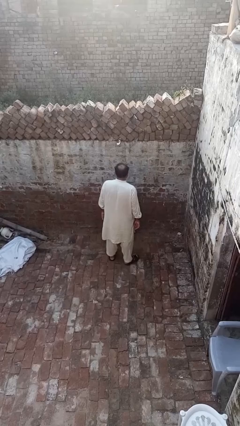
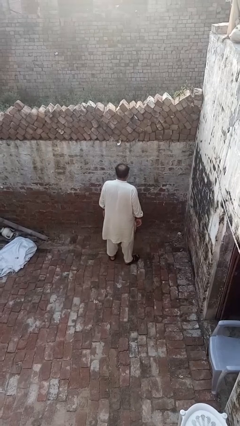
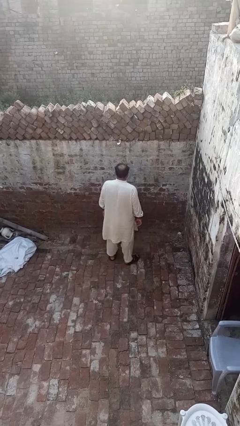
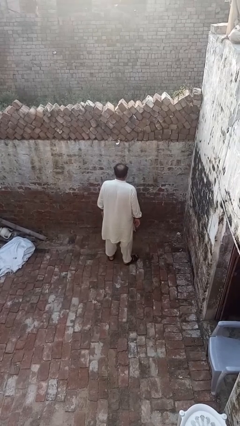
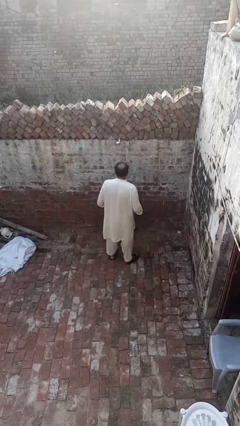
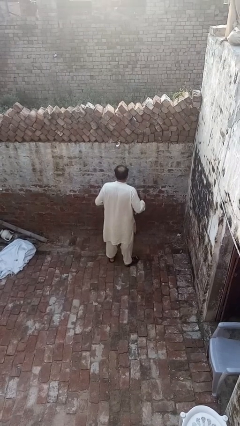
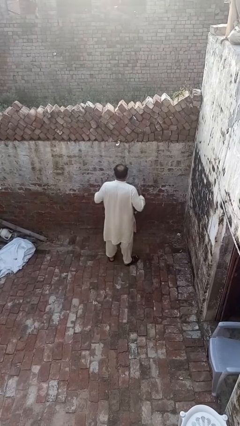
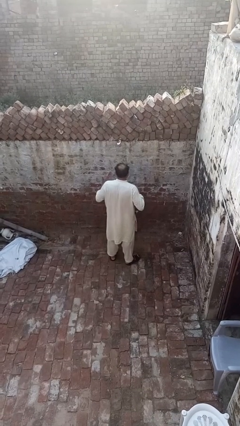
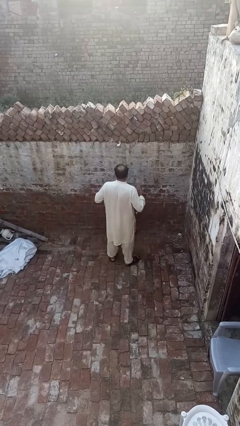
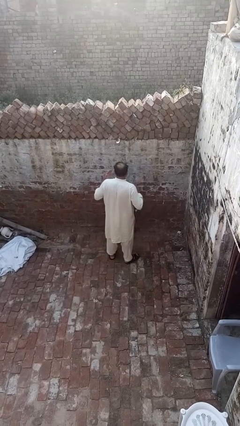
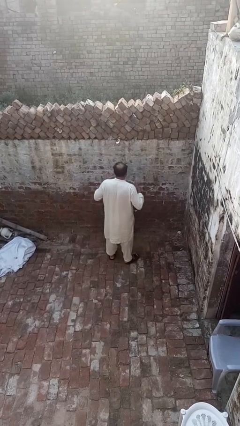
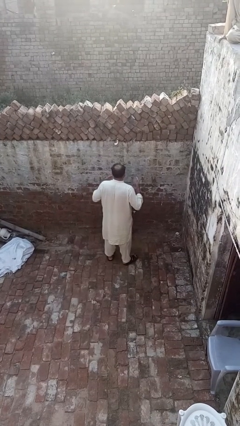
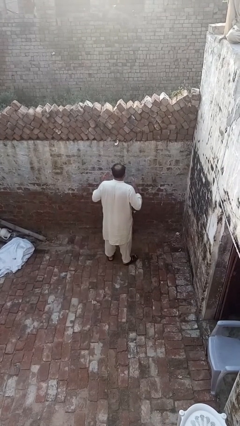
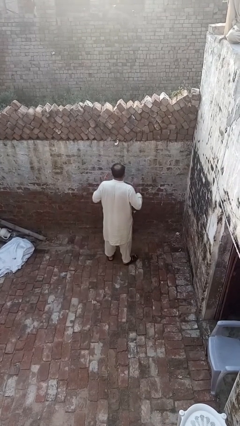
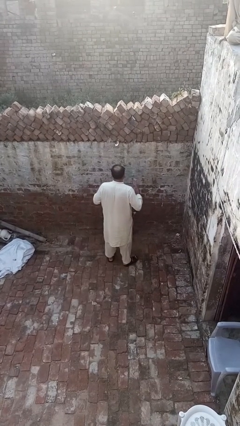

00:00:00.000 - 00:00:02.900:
person drums on chest

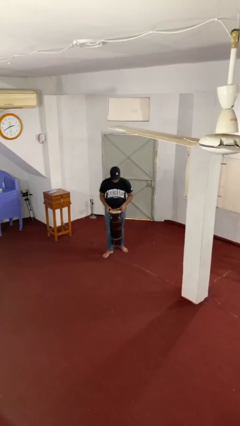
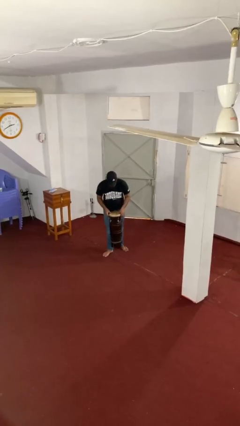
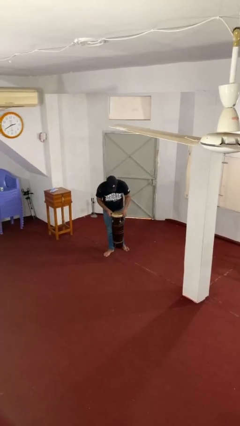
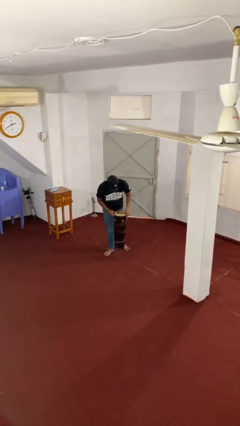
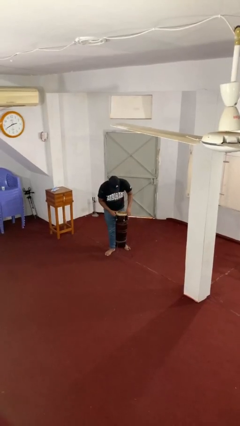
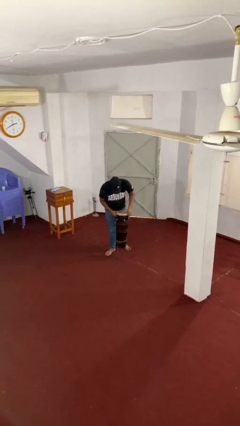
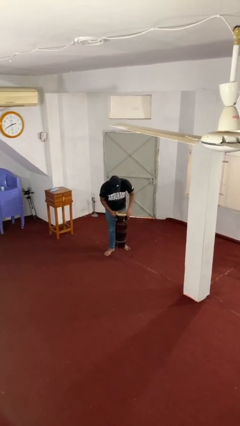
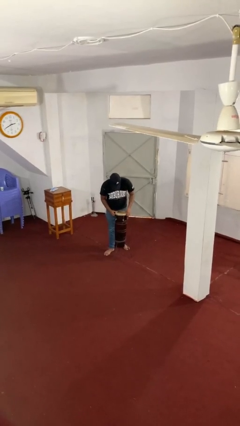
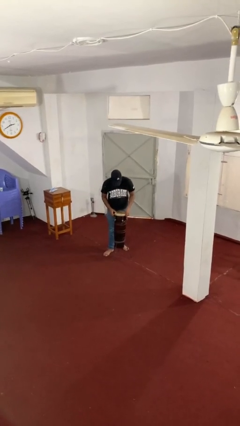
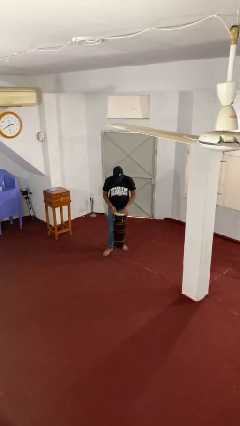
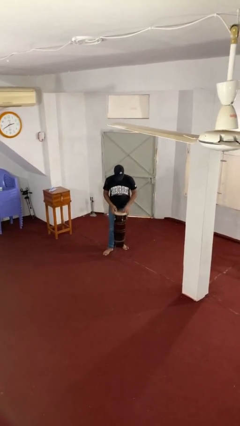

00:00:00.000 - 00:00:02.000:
person puts down object on floor

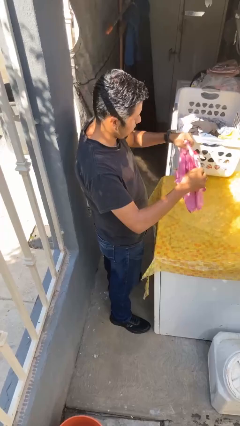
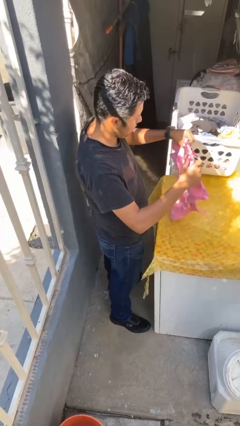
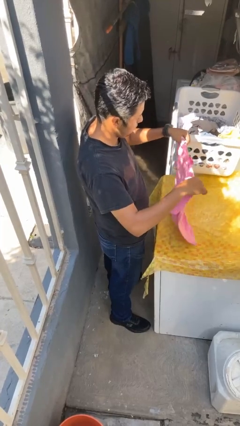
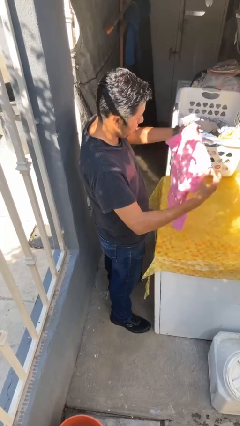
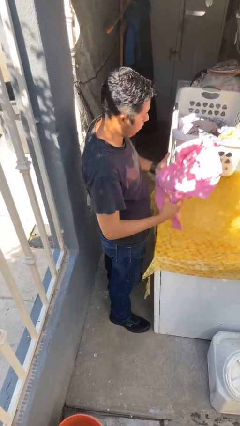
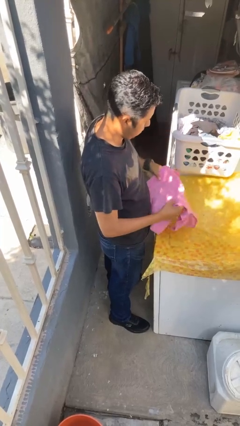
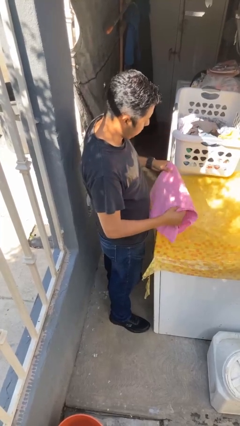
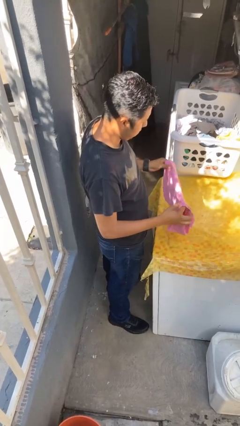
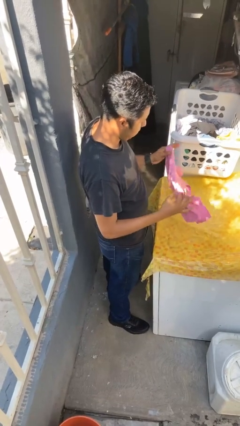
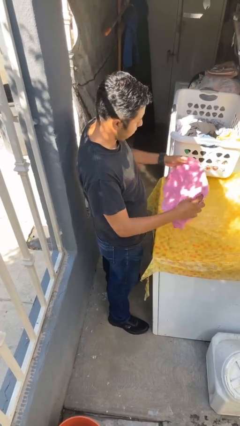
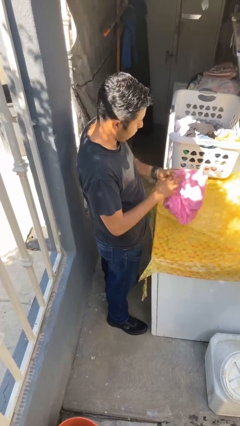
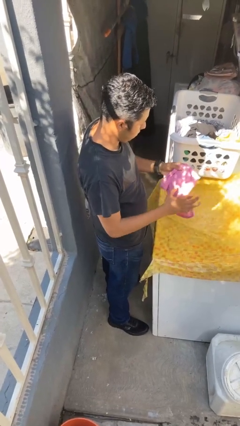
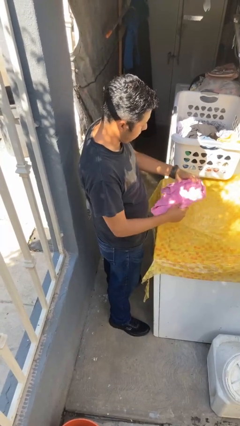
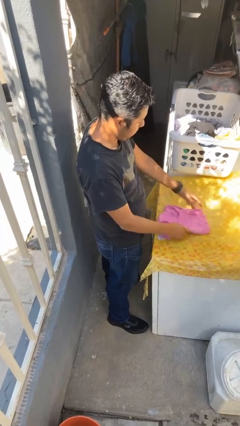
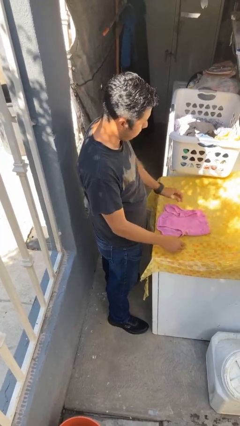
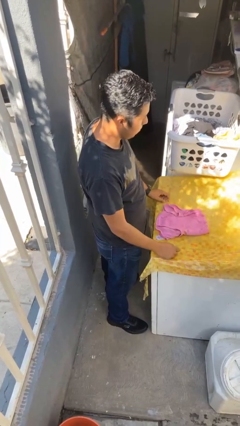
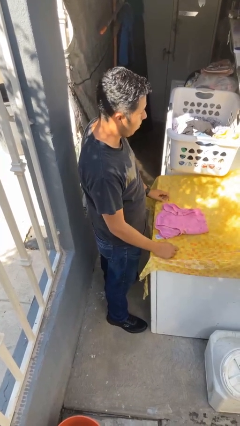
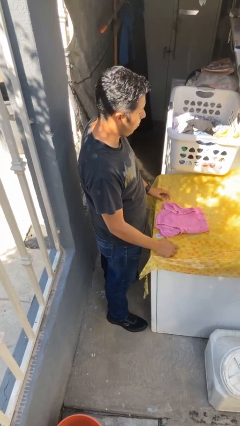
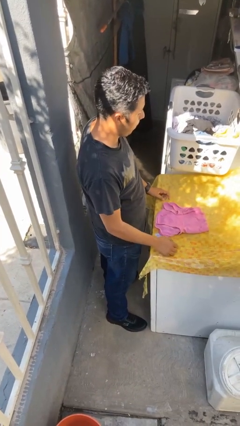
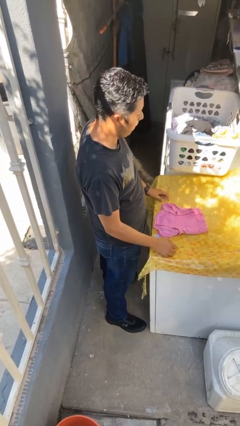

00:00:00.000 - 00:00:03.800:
person folds shirt

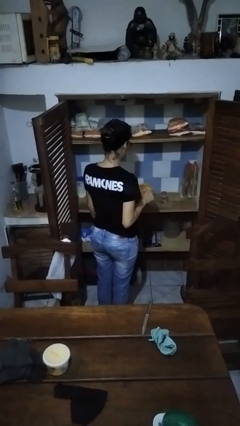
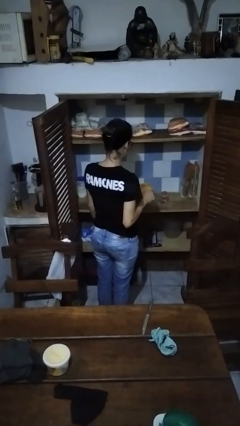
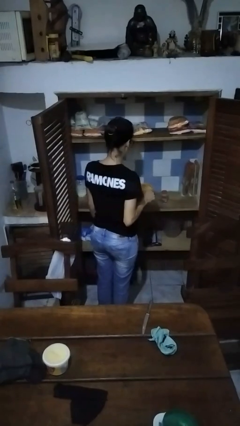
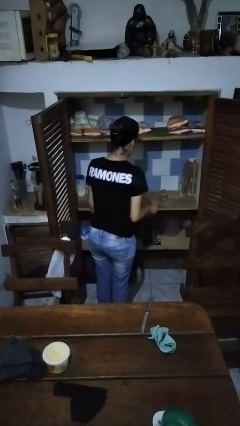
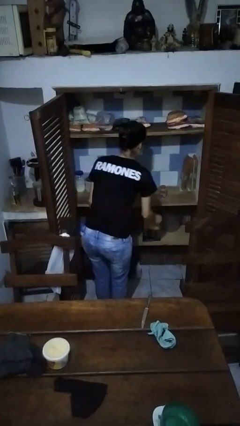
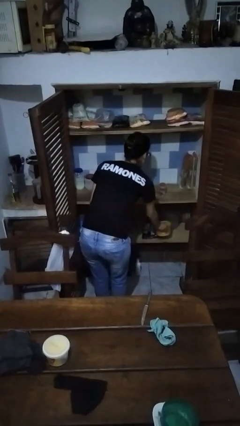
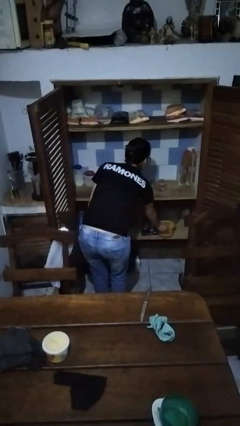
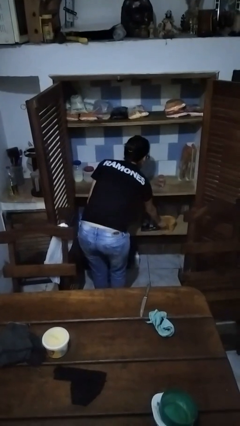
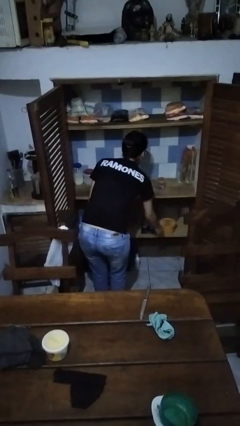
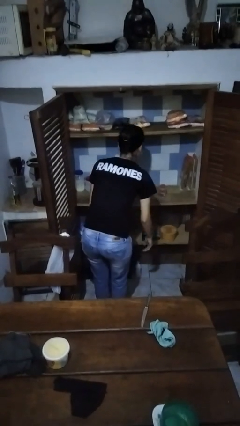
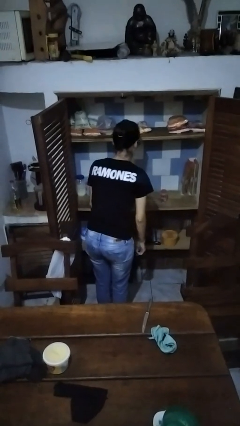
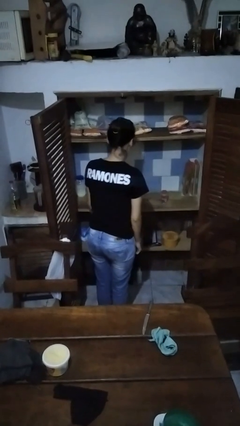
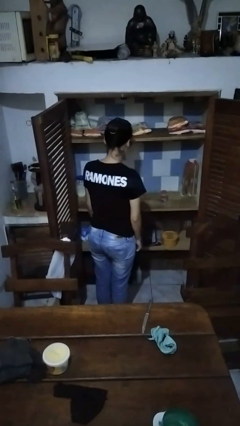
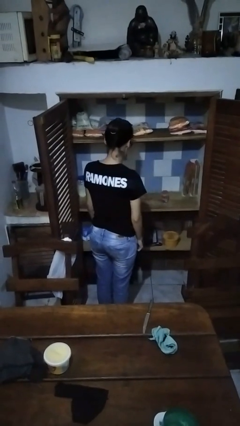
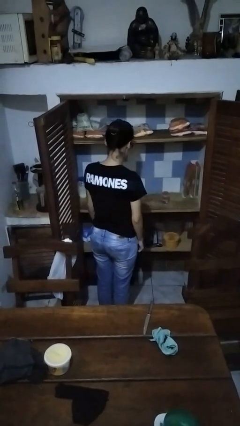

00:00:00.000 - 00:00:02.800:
person puts object in cabinet

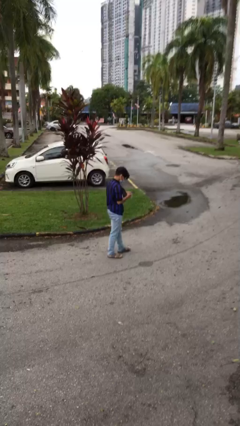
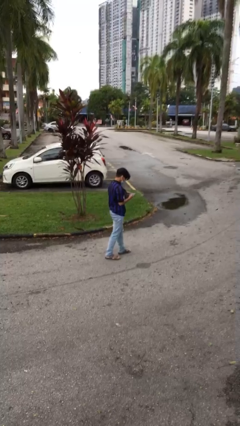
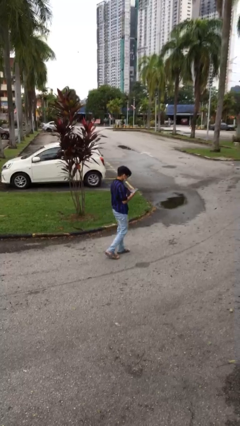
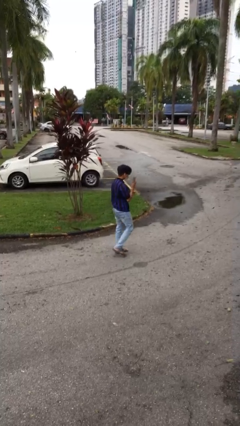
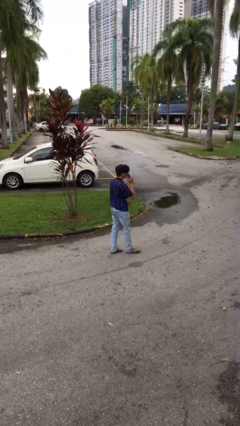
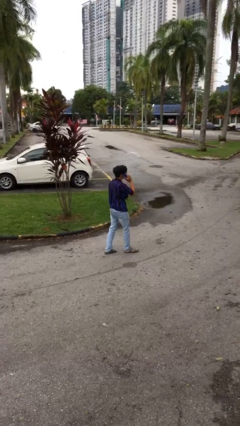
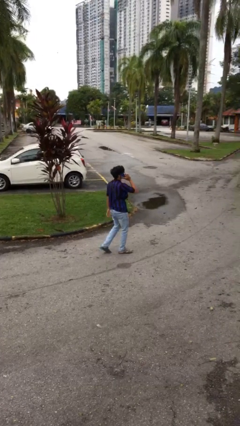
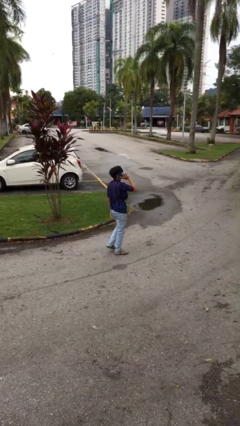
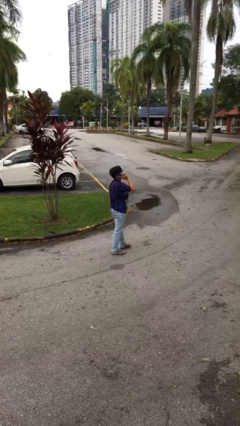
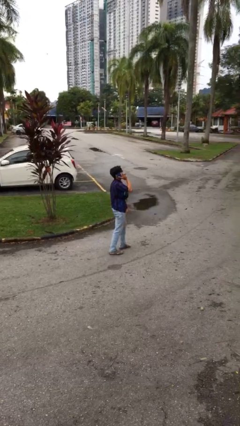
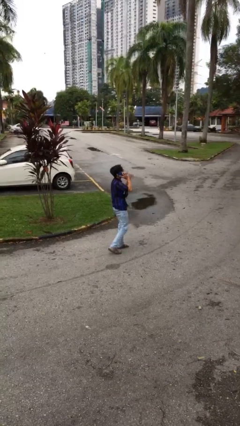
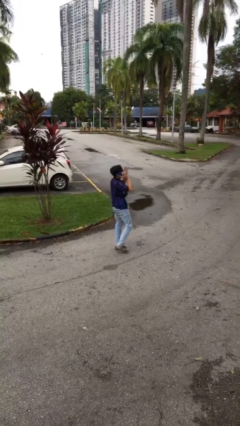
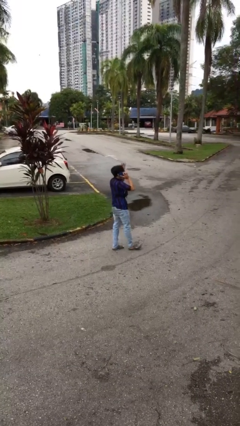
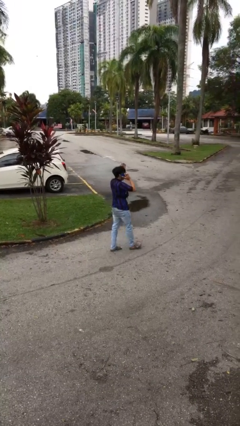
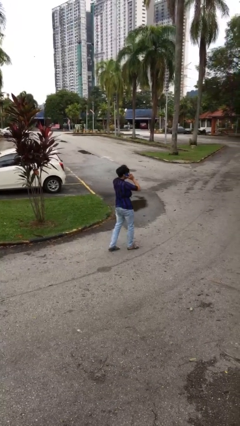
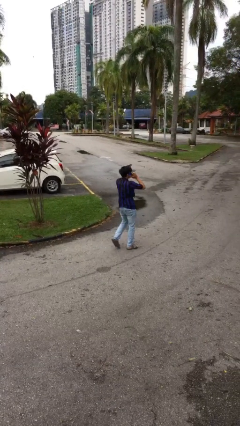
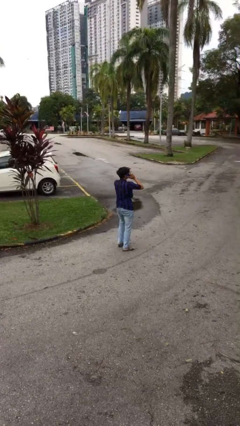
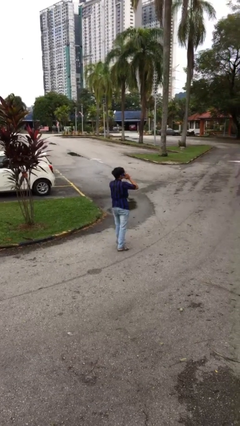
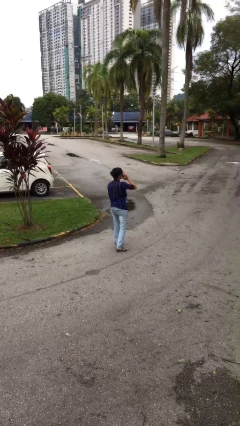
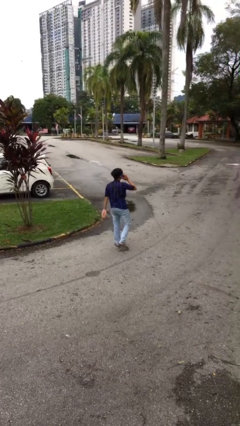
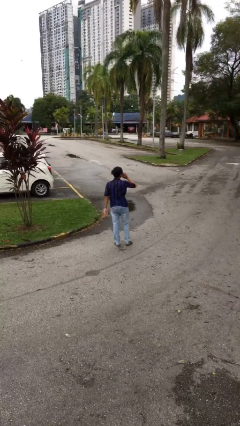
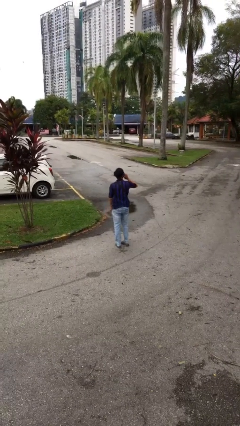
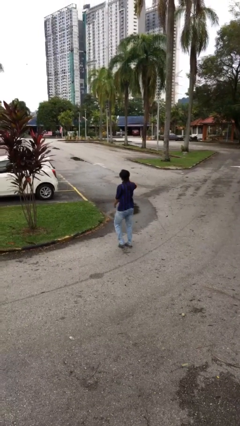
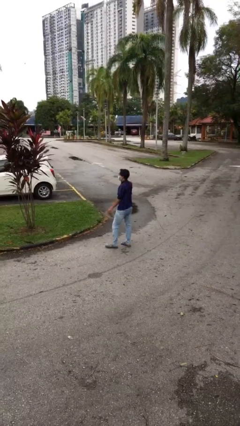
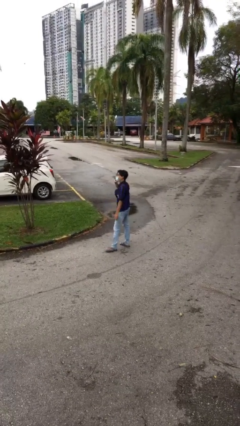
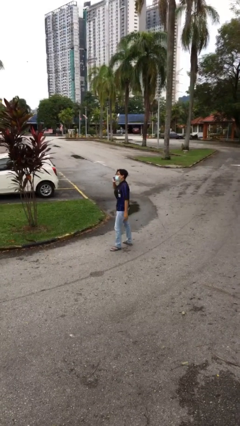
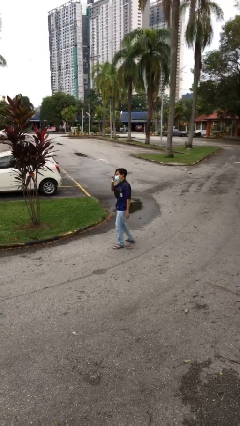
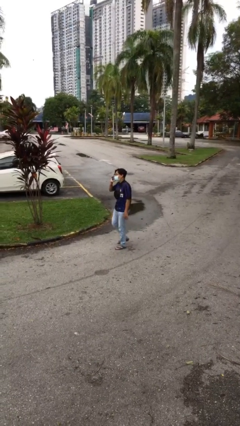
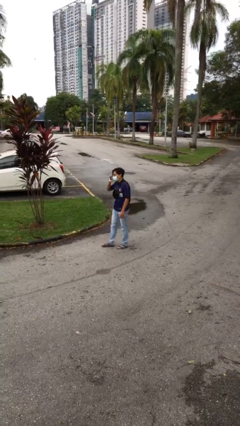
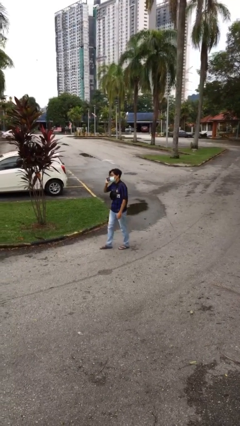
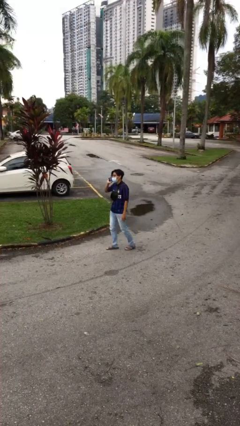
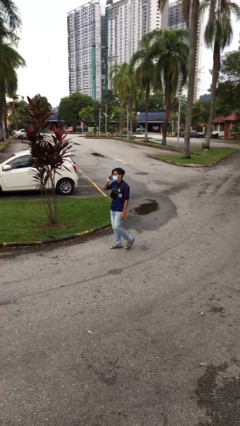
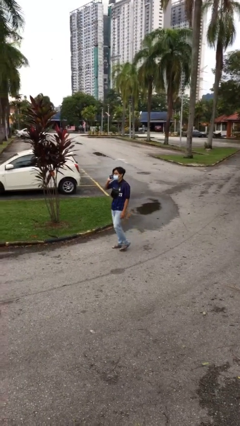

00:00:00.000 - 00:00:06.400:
person talks on phone
